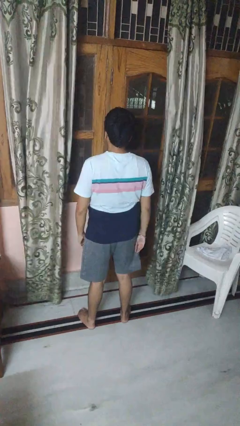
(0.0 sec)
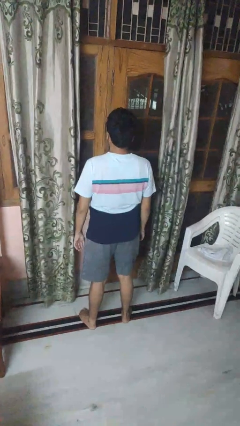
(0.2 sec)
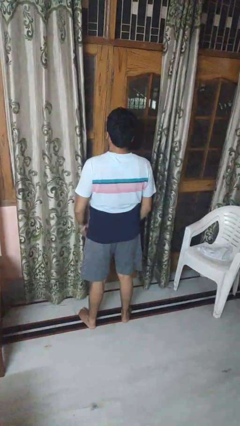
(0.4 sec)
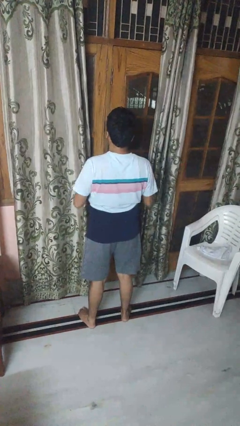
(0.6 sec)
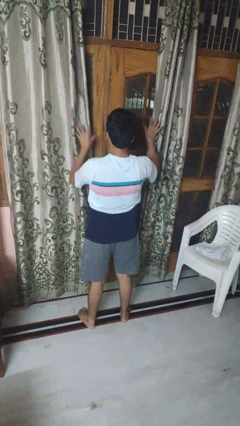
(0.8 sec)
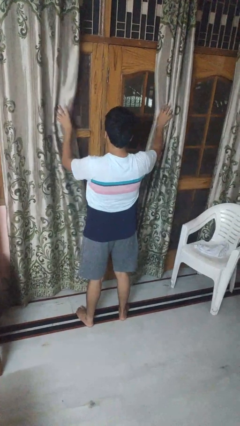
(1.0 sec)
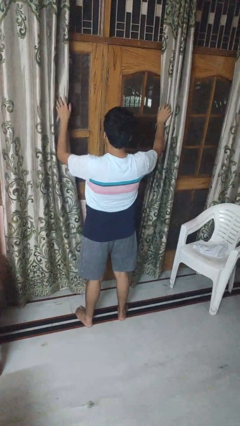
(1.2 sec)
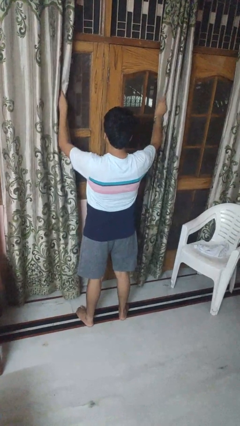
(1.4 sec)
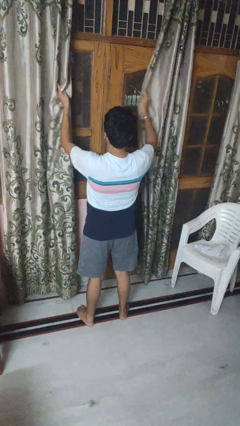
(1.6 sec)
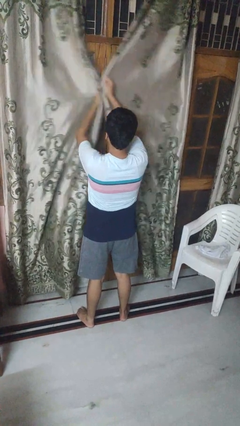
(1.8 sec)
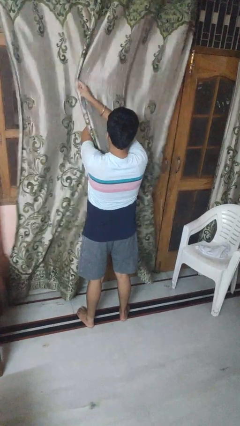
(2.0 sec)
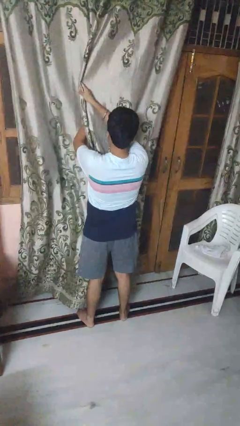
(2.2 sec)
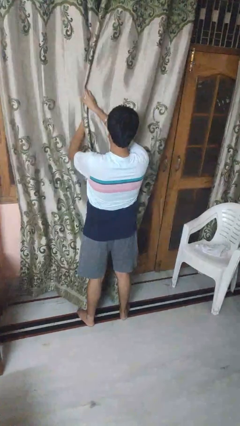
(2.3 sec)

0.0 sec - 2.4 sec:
person closes curtains

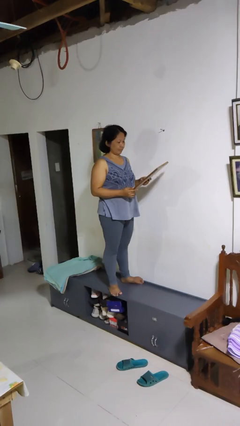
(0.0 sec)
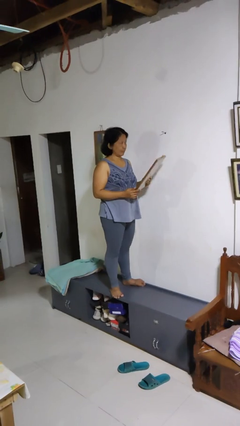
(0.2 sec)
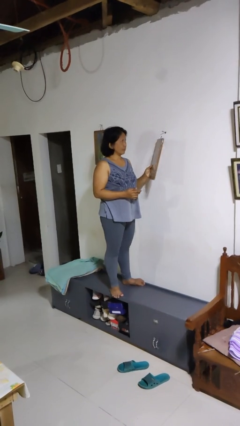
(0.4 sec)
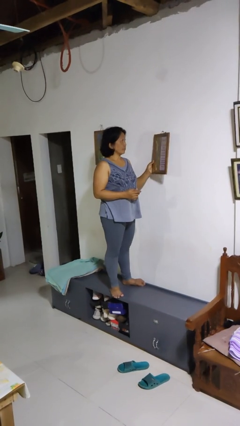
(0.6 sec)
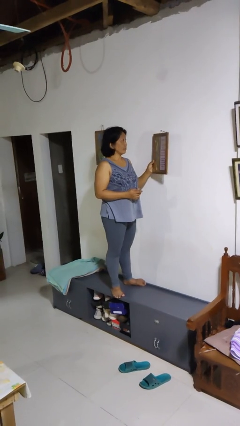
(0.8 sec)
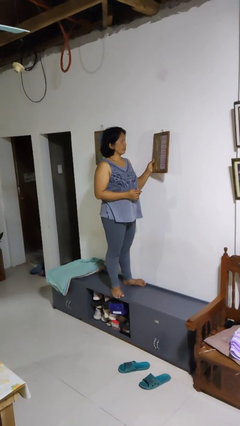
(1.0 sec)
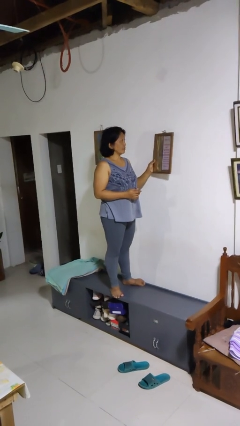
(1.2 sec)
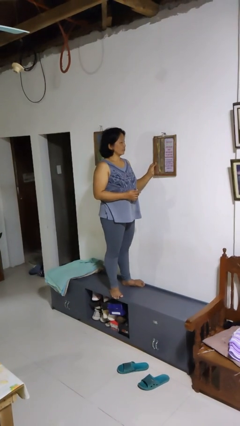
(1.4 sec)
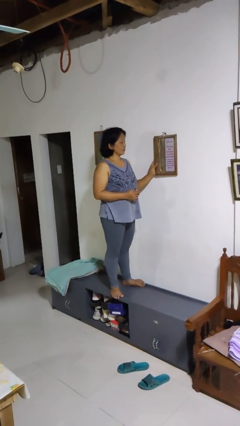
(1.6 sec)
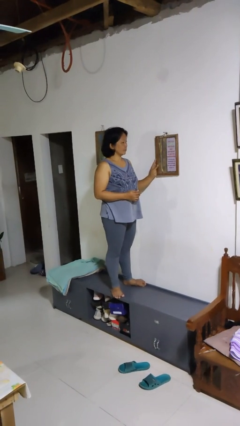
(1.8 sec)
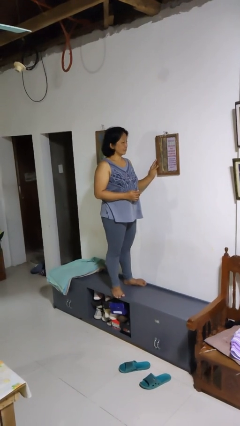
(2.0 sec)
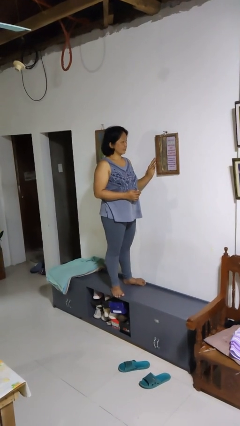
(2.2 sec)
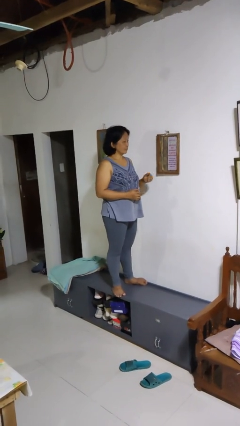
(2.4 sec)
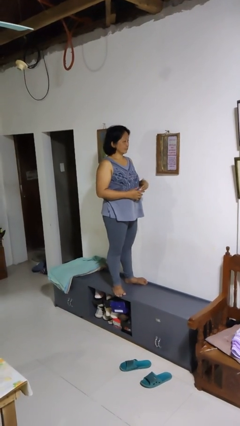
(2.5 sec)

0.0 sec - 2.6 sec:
person puts up picture frame

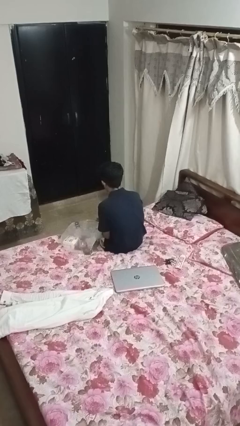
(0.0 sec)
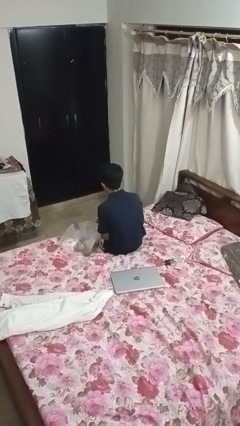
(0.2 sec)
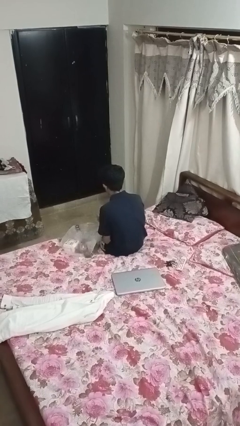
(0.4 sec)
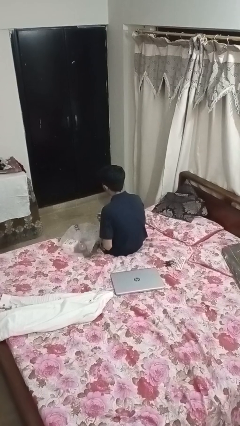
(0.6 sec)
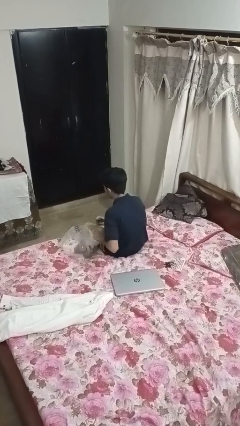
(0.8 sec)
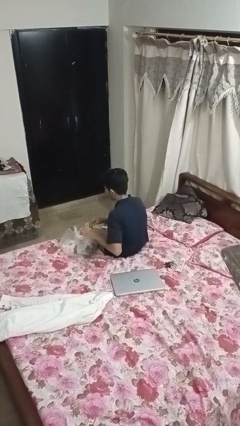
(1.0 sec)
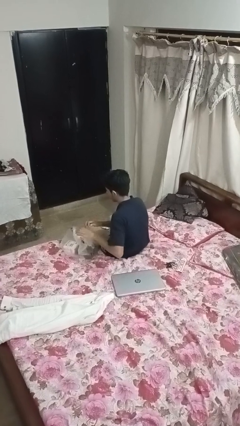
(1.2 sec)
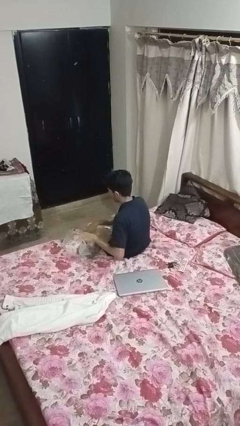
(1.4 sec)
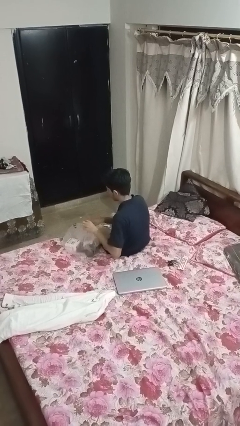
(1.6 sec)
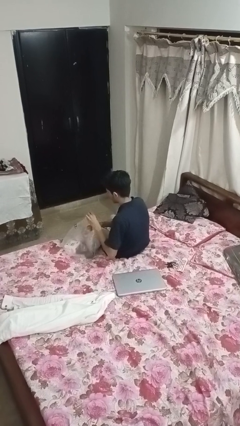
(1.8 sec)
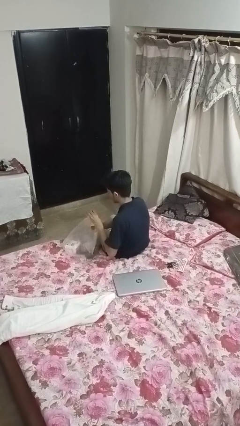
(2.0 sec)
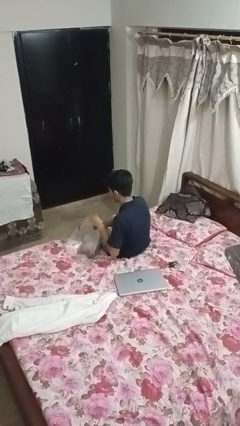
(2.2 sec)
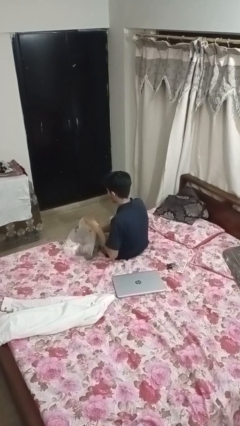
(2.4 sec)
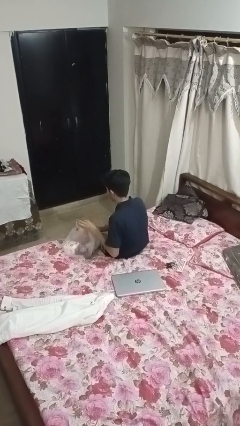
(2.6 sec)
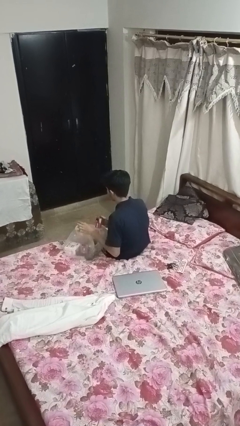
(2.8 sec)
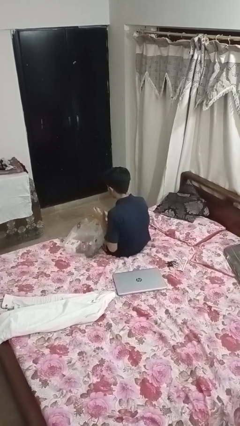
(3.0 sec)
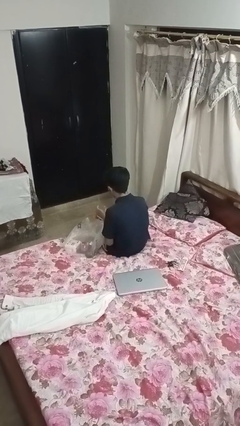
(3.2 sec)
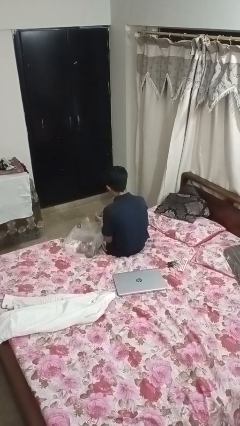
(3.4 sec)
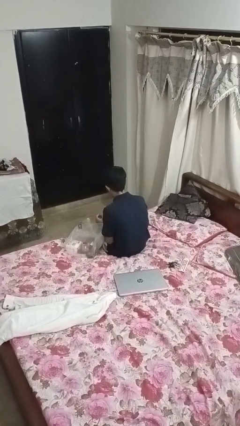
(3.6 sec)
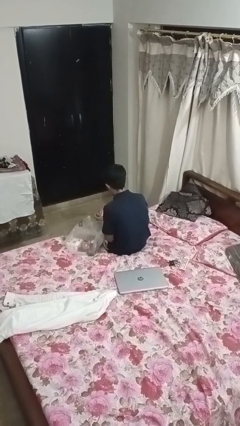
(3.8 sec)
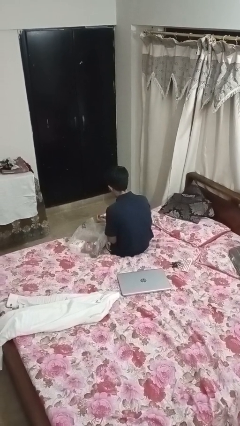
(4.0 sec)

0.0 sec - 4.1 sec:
person takes object from bag

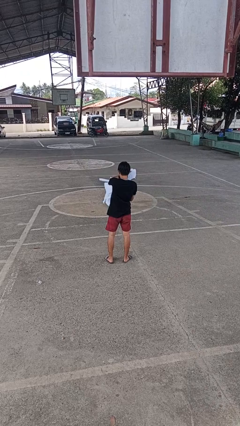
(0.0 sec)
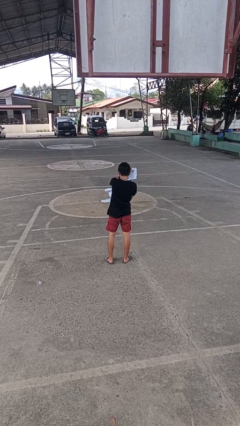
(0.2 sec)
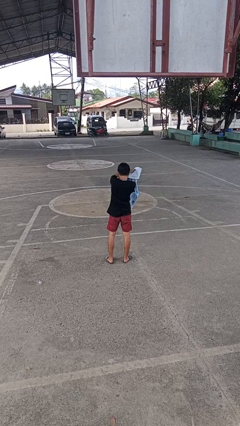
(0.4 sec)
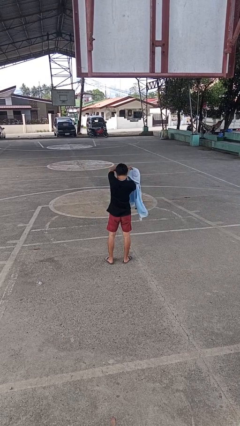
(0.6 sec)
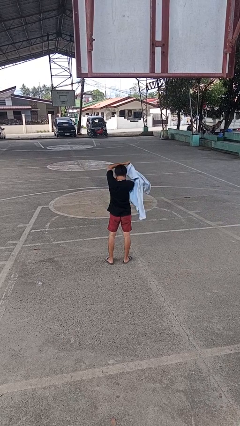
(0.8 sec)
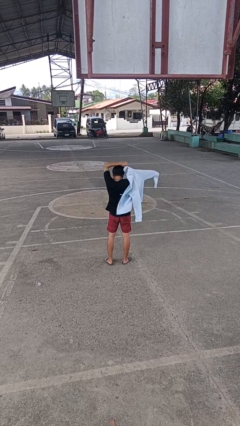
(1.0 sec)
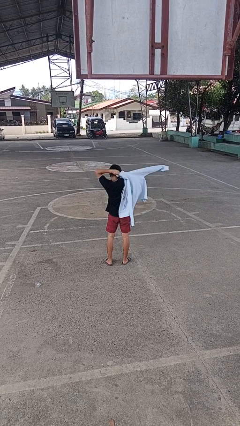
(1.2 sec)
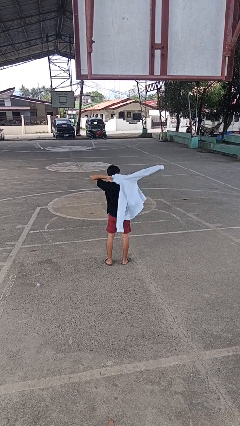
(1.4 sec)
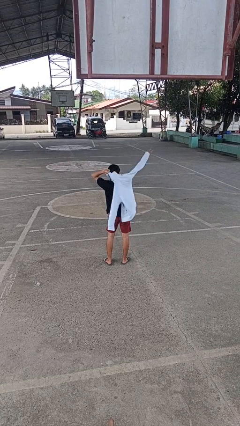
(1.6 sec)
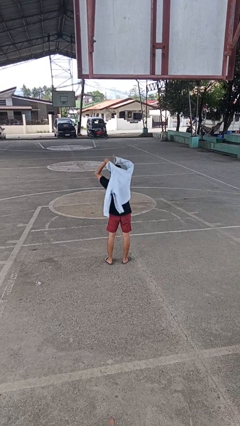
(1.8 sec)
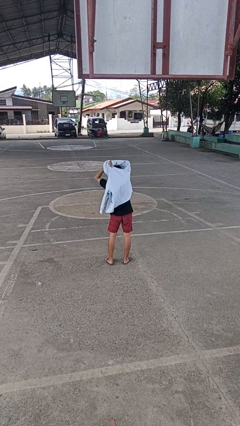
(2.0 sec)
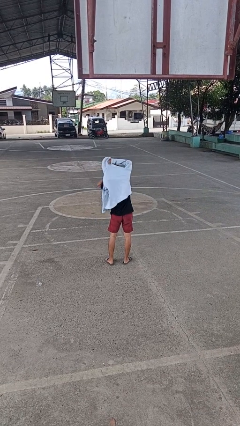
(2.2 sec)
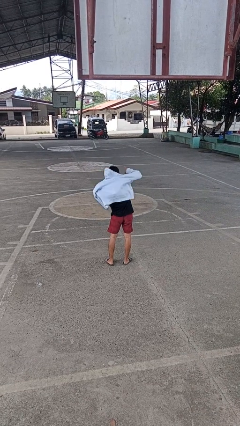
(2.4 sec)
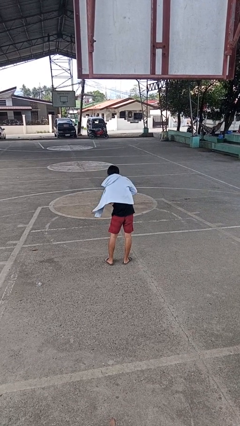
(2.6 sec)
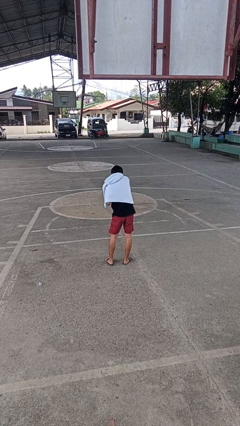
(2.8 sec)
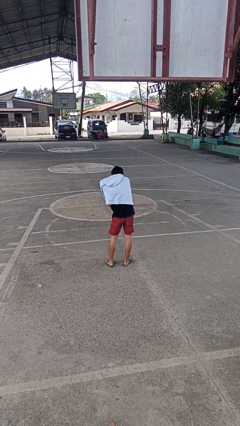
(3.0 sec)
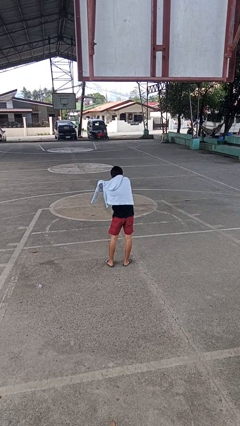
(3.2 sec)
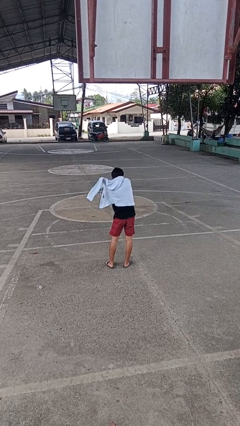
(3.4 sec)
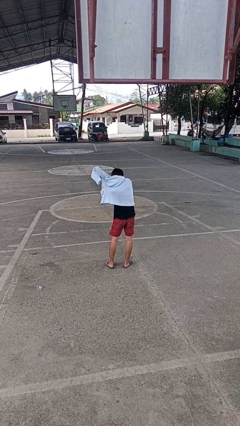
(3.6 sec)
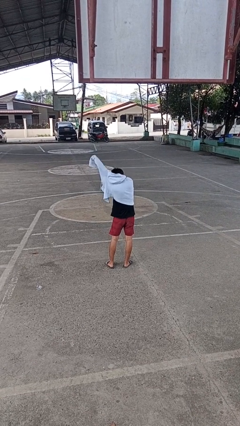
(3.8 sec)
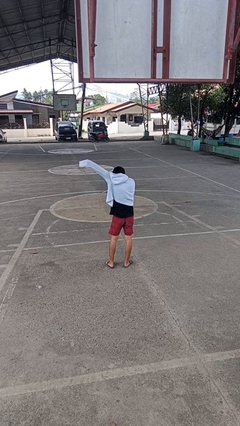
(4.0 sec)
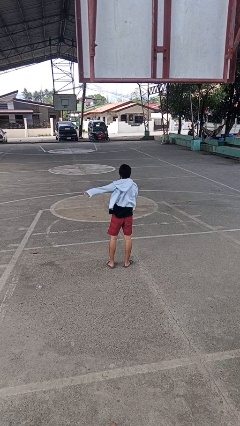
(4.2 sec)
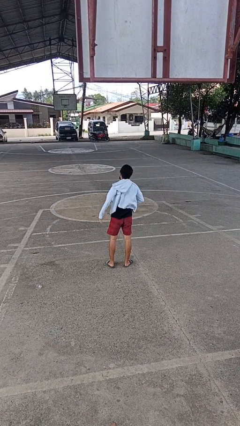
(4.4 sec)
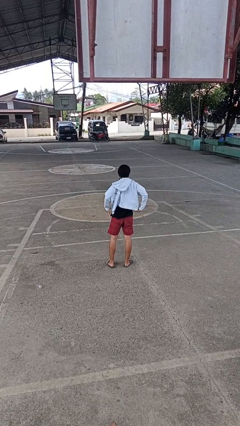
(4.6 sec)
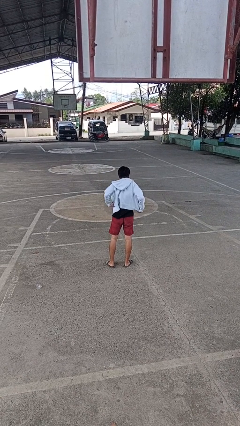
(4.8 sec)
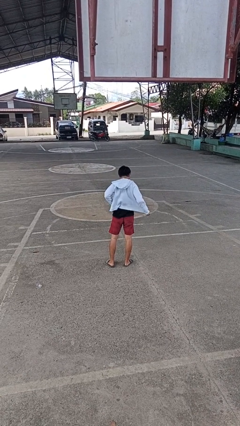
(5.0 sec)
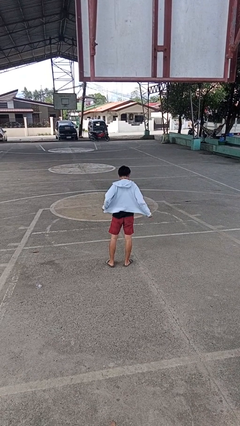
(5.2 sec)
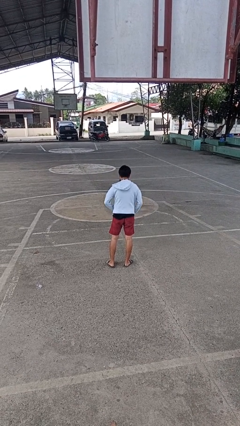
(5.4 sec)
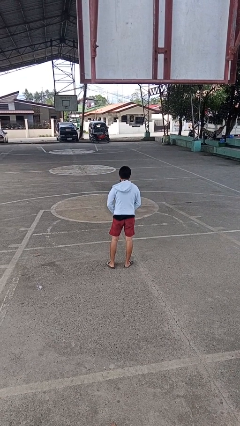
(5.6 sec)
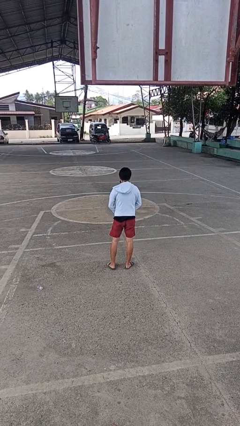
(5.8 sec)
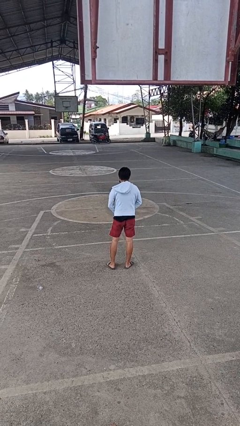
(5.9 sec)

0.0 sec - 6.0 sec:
person puts on jacket

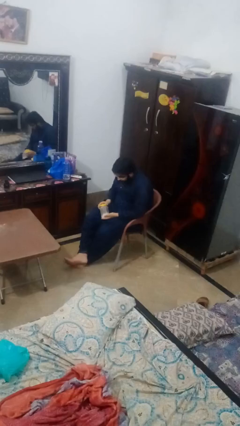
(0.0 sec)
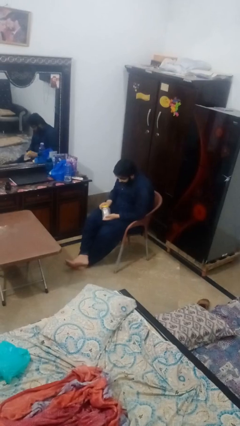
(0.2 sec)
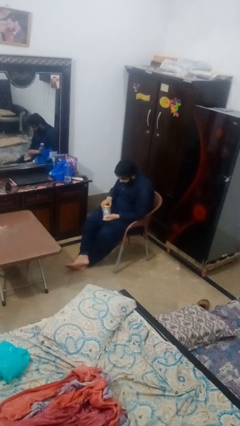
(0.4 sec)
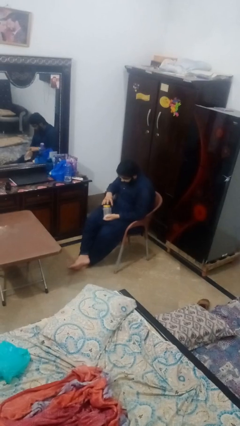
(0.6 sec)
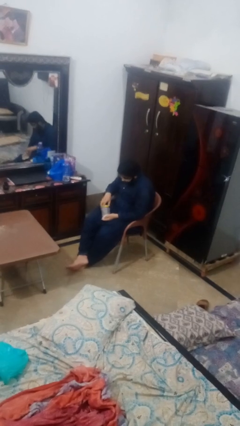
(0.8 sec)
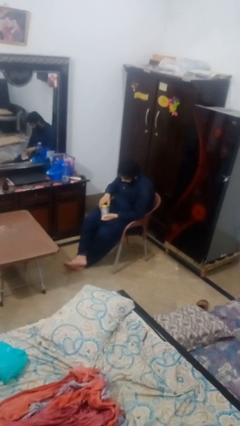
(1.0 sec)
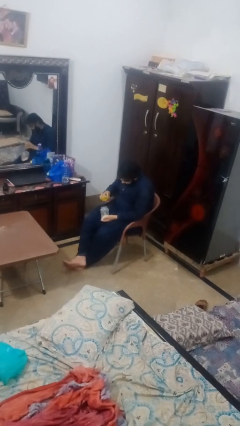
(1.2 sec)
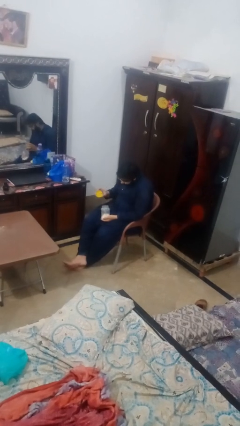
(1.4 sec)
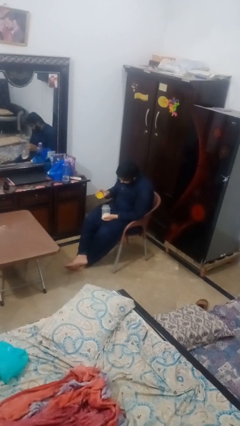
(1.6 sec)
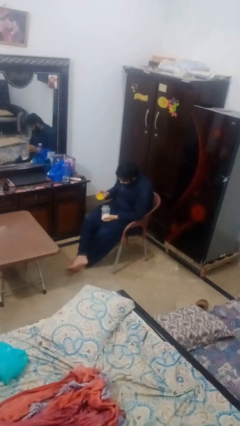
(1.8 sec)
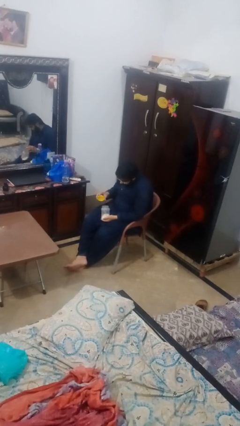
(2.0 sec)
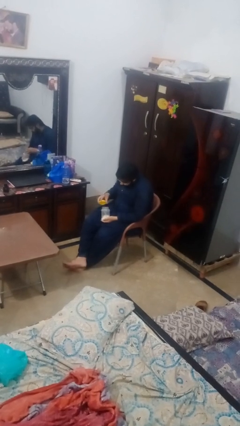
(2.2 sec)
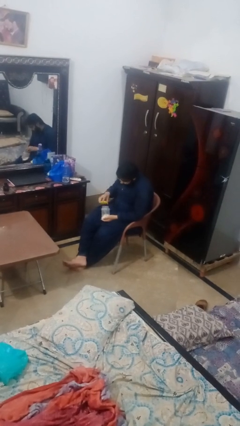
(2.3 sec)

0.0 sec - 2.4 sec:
person opens jar
